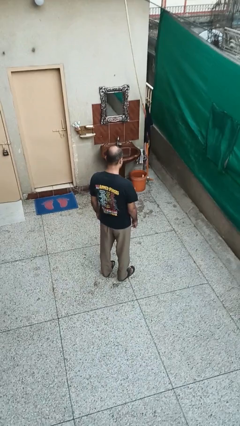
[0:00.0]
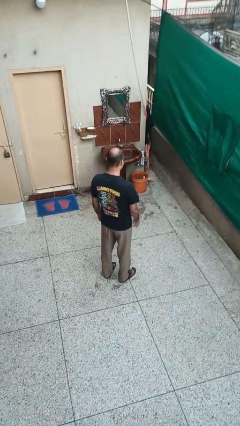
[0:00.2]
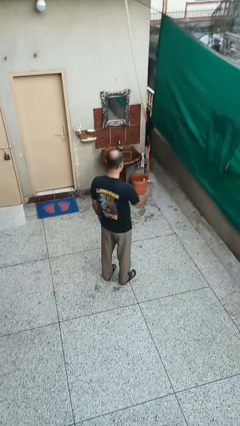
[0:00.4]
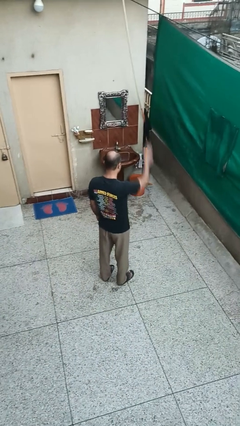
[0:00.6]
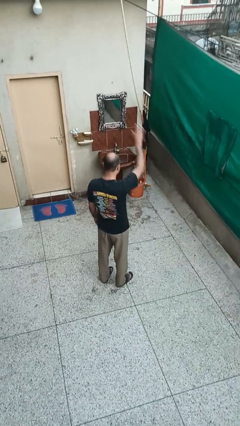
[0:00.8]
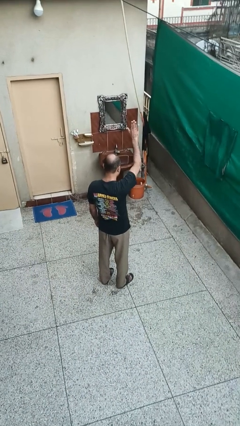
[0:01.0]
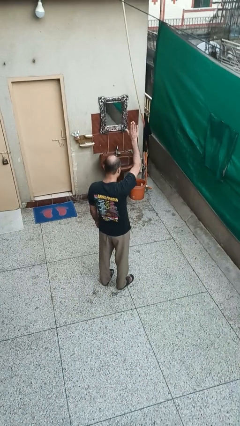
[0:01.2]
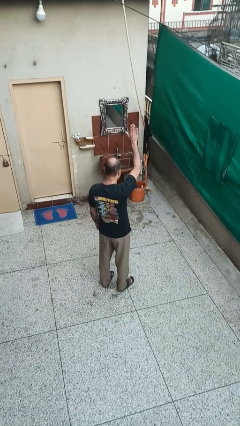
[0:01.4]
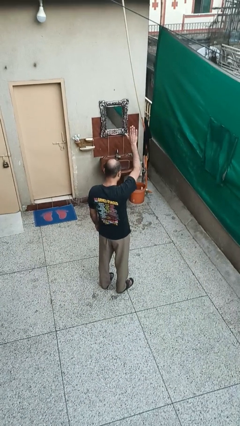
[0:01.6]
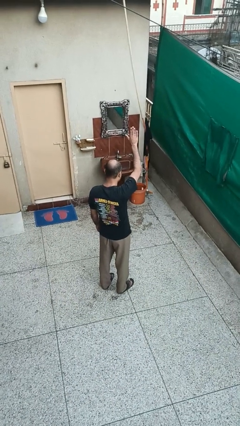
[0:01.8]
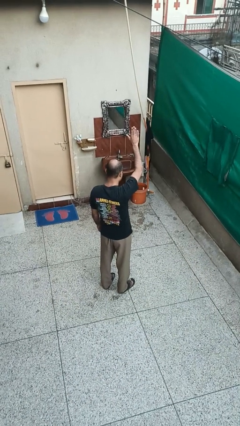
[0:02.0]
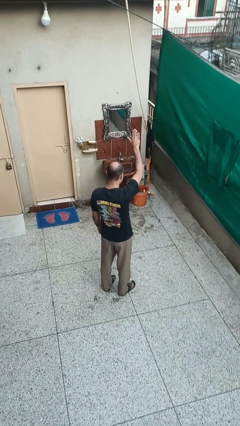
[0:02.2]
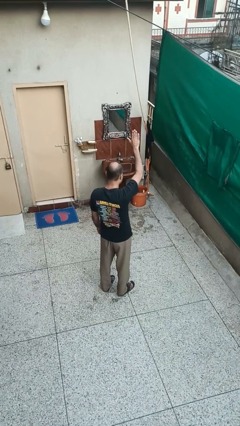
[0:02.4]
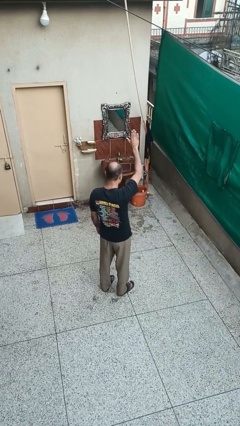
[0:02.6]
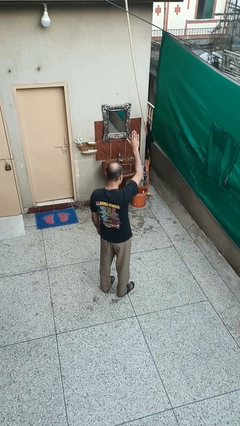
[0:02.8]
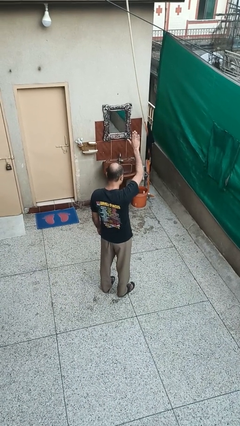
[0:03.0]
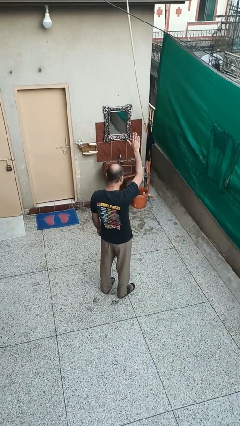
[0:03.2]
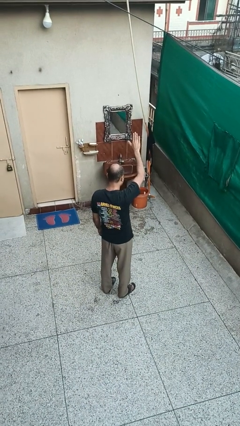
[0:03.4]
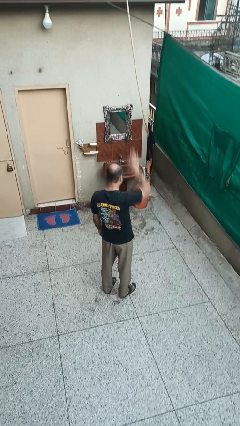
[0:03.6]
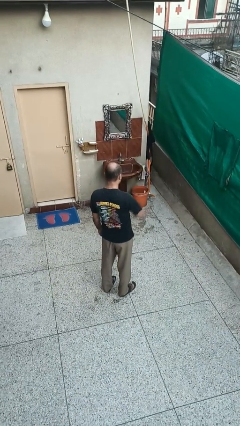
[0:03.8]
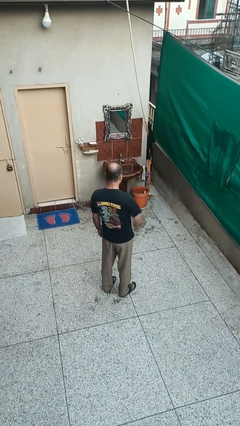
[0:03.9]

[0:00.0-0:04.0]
person gestures raise hand

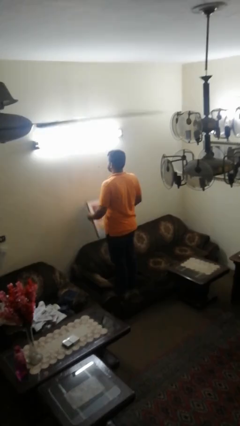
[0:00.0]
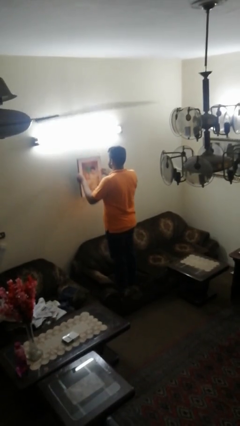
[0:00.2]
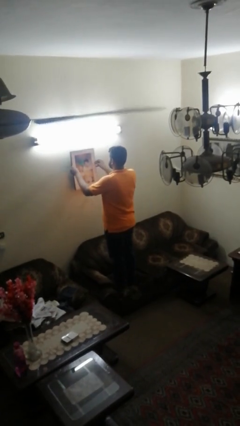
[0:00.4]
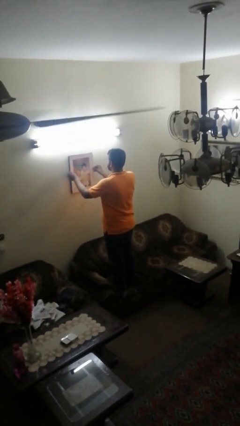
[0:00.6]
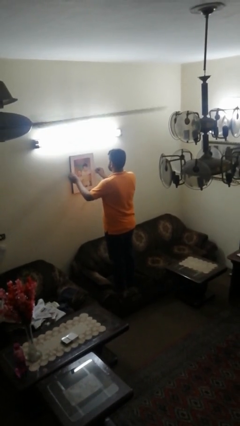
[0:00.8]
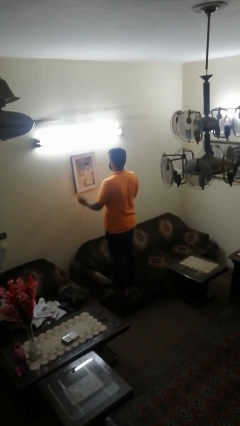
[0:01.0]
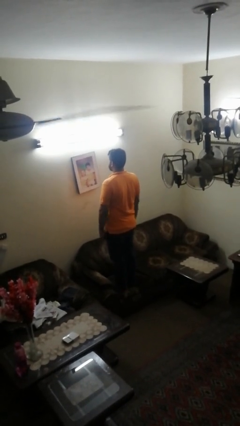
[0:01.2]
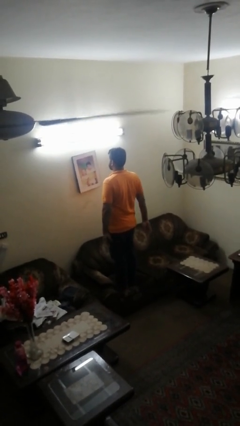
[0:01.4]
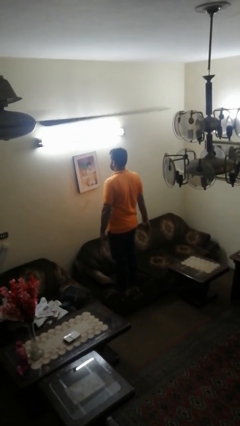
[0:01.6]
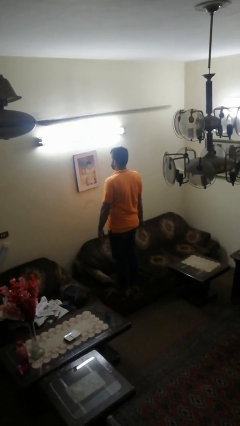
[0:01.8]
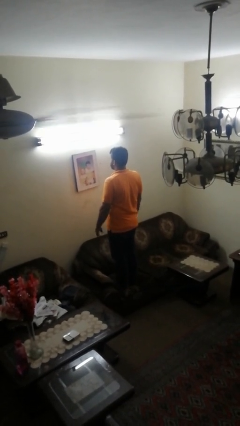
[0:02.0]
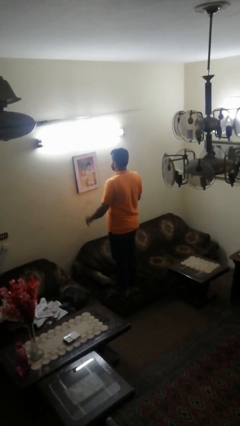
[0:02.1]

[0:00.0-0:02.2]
person puts up picture frame

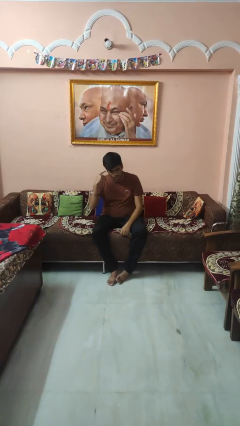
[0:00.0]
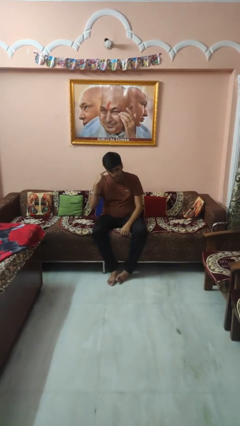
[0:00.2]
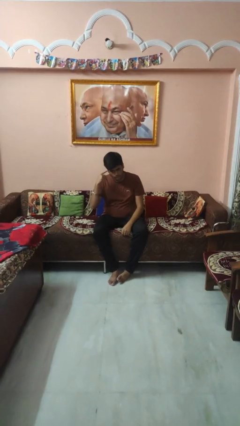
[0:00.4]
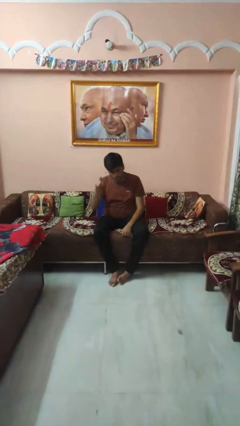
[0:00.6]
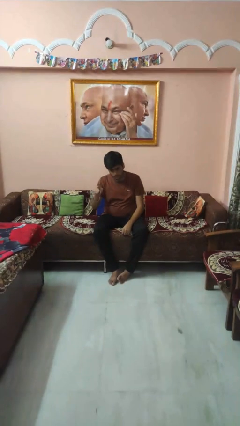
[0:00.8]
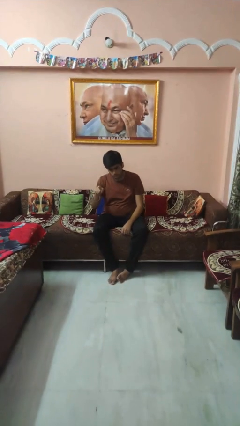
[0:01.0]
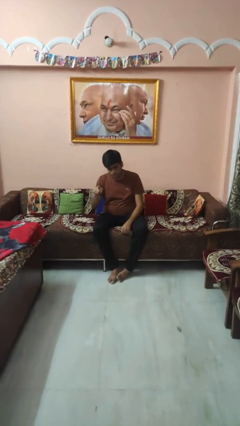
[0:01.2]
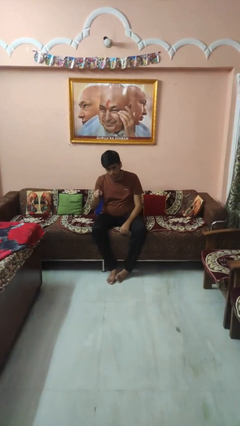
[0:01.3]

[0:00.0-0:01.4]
person gestures listen closely

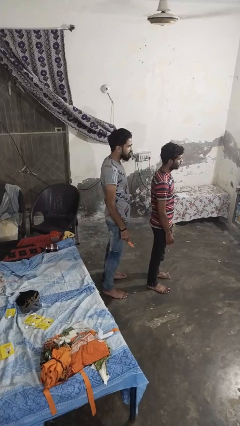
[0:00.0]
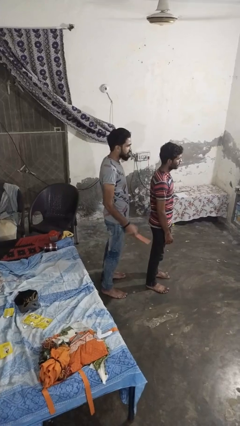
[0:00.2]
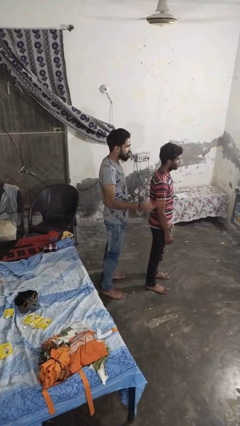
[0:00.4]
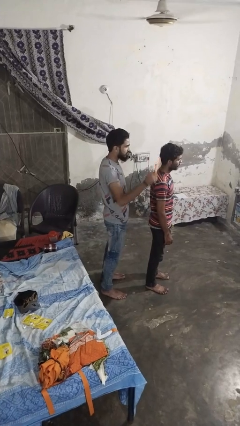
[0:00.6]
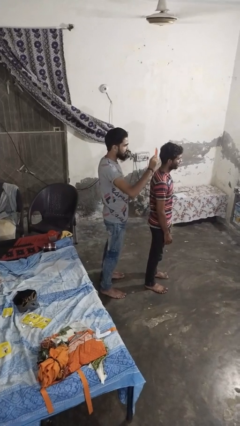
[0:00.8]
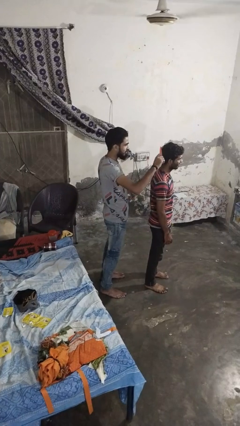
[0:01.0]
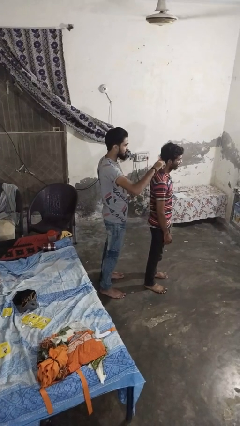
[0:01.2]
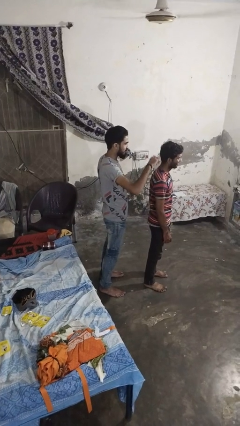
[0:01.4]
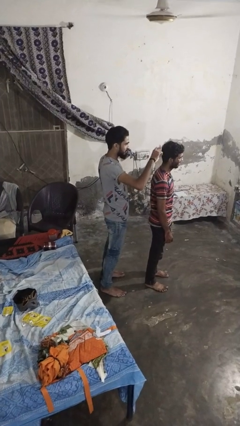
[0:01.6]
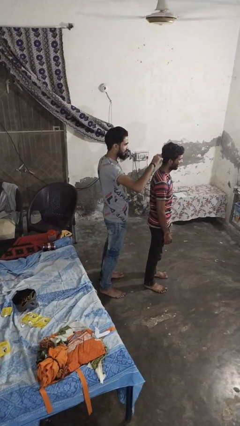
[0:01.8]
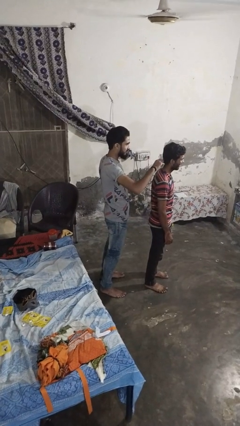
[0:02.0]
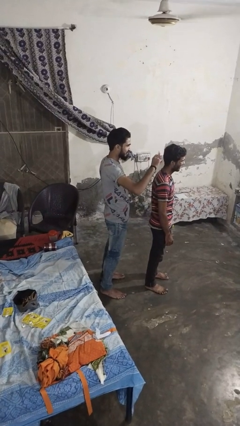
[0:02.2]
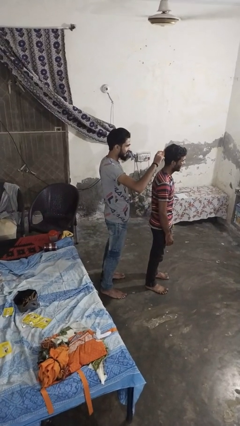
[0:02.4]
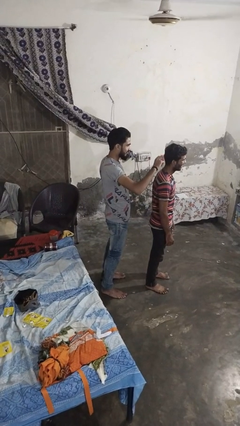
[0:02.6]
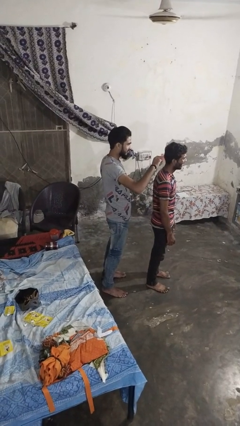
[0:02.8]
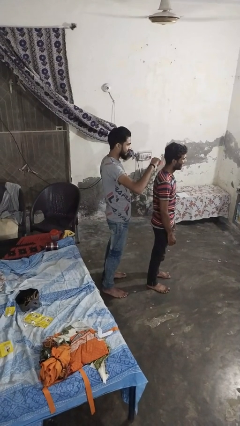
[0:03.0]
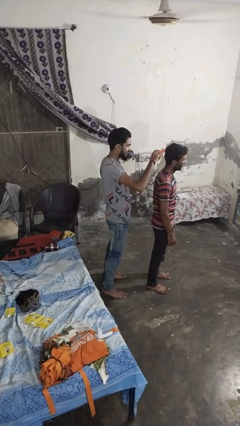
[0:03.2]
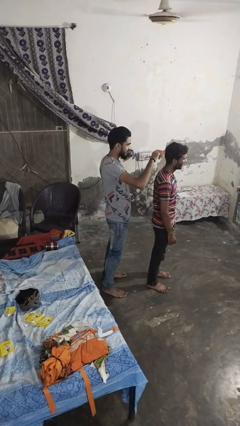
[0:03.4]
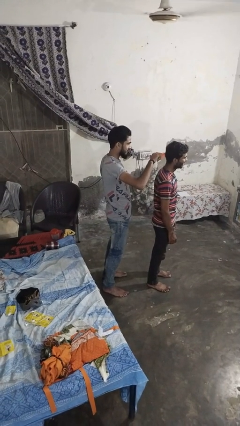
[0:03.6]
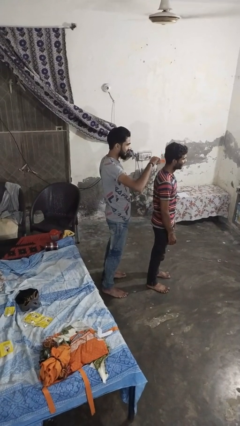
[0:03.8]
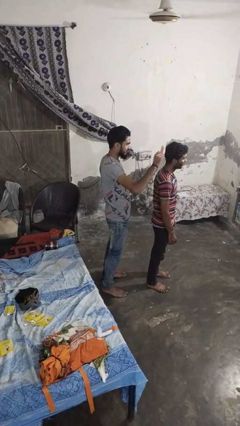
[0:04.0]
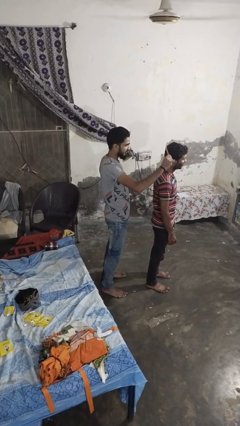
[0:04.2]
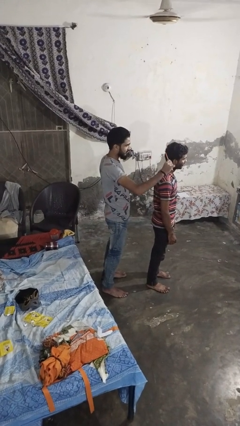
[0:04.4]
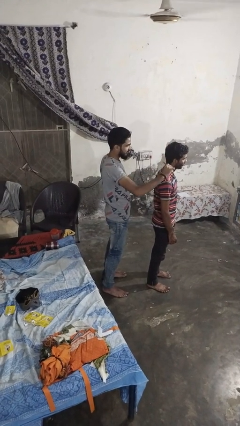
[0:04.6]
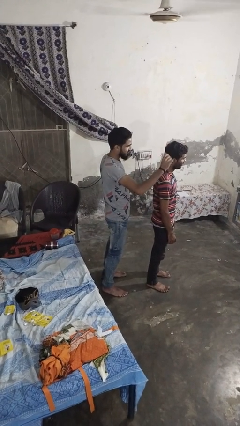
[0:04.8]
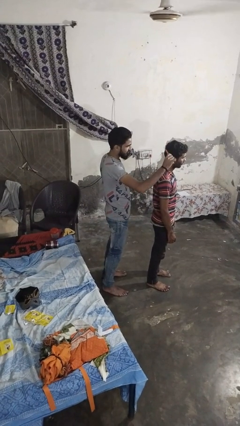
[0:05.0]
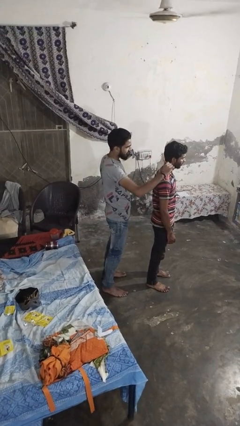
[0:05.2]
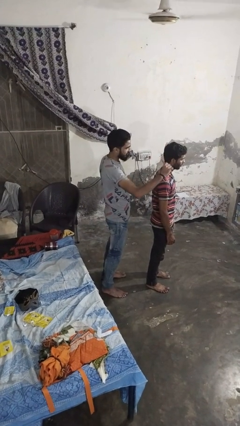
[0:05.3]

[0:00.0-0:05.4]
person brushes hair of person

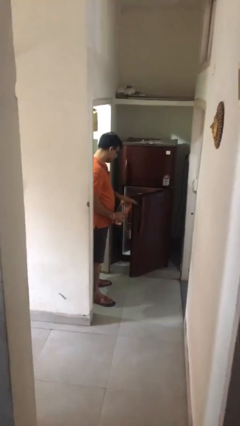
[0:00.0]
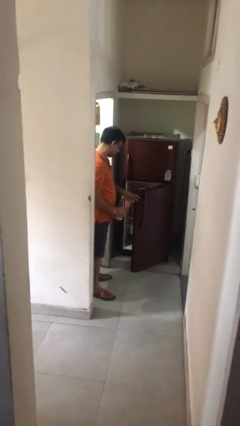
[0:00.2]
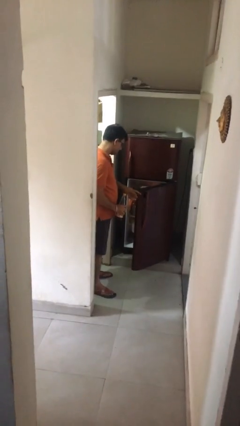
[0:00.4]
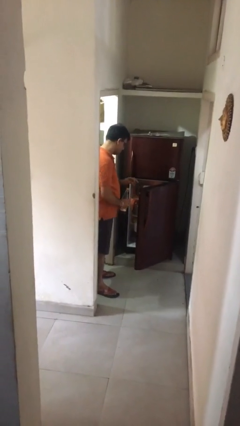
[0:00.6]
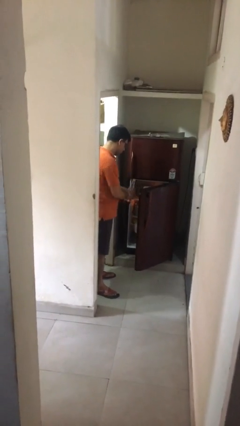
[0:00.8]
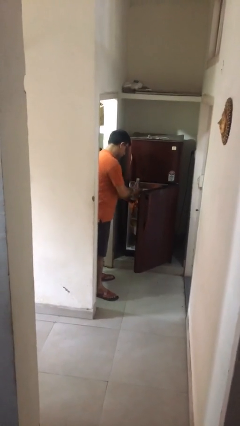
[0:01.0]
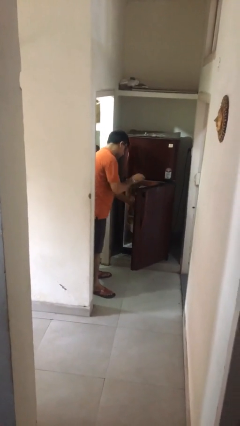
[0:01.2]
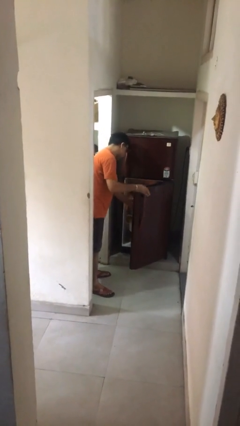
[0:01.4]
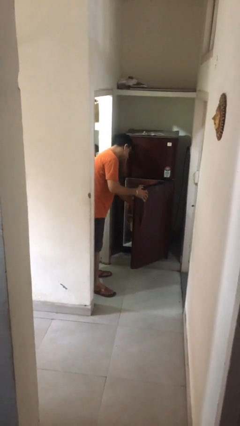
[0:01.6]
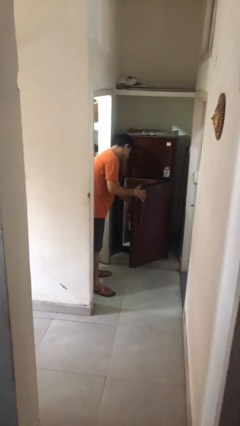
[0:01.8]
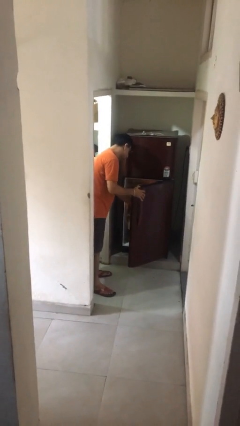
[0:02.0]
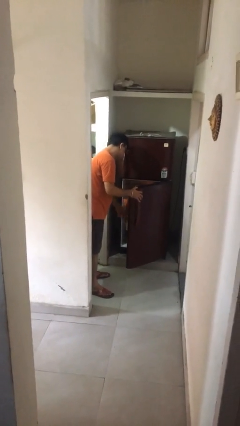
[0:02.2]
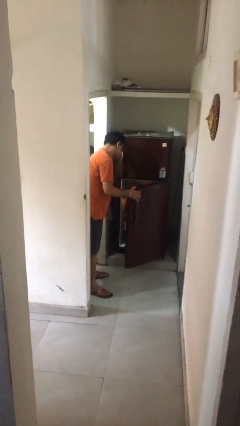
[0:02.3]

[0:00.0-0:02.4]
person puts object into refrigerator

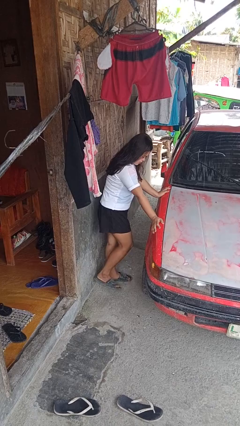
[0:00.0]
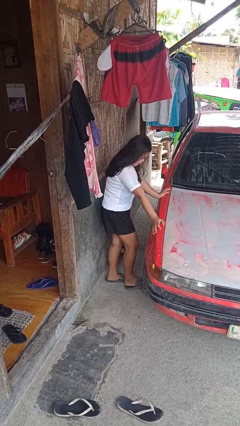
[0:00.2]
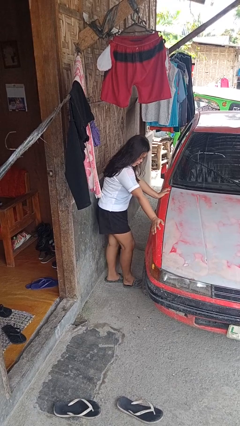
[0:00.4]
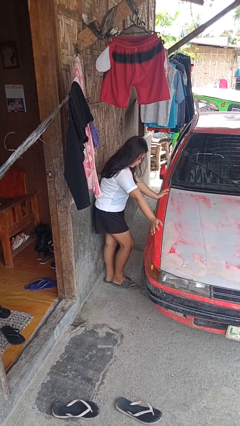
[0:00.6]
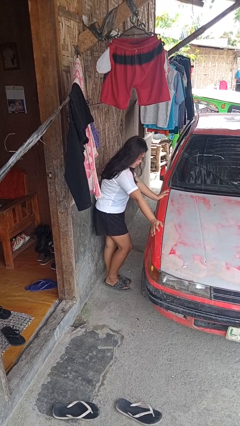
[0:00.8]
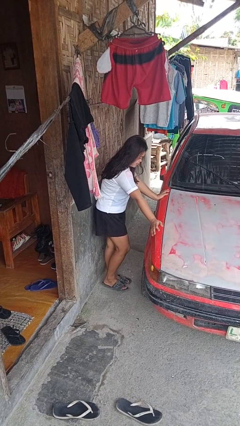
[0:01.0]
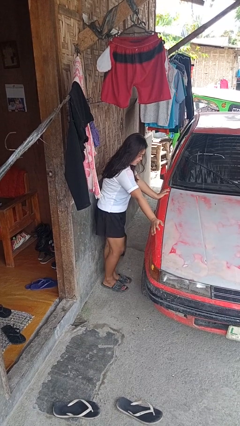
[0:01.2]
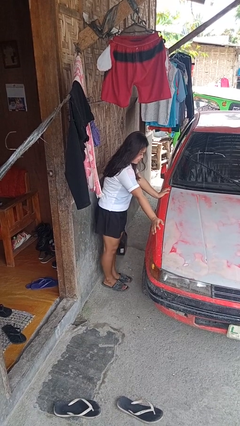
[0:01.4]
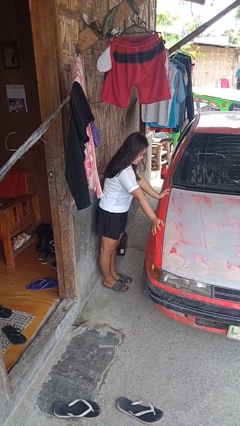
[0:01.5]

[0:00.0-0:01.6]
person kicks car tires

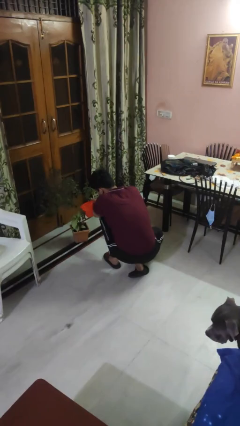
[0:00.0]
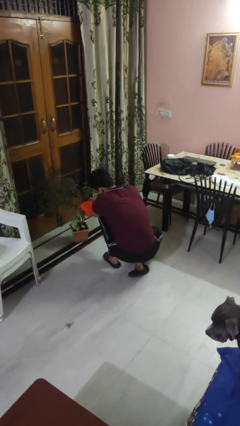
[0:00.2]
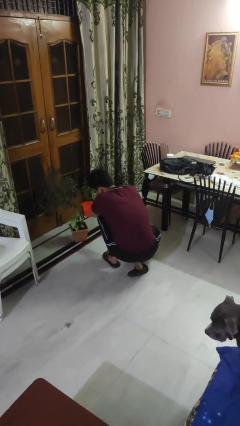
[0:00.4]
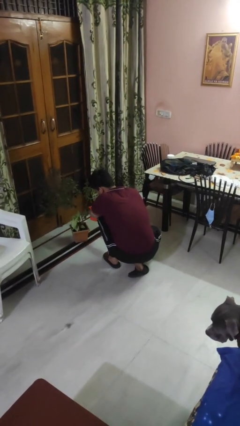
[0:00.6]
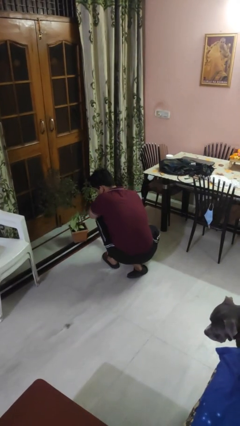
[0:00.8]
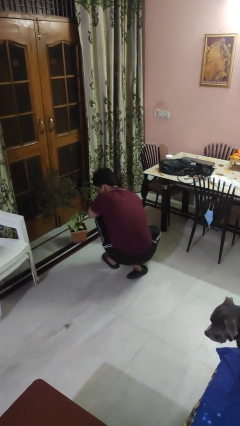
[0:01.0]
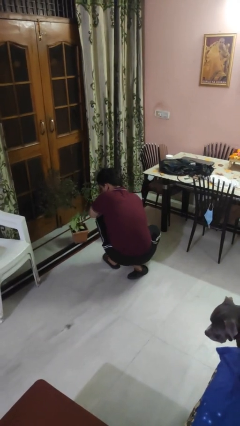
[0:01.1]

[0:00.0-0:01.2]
person waters houseplant
